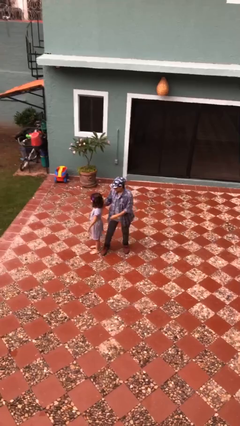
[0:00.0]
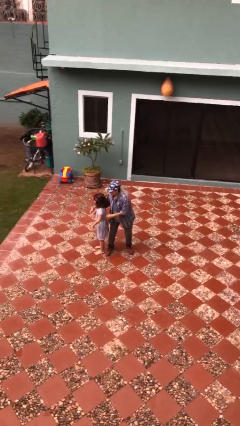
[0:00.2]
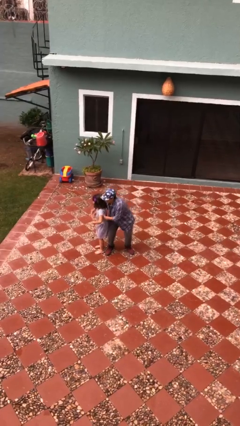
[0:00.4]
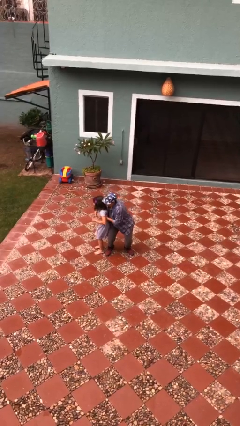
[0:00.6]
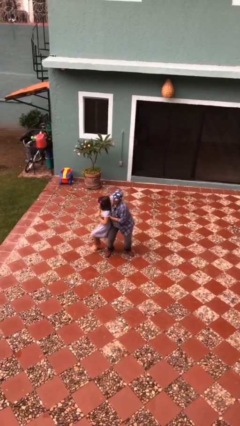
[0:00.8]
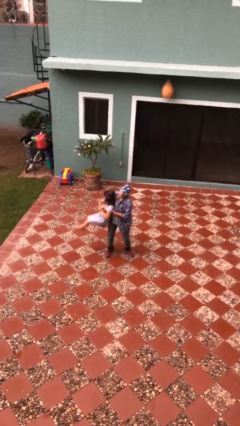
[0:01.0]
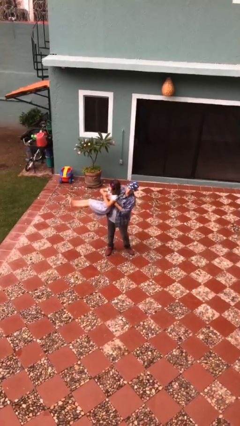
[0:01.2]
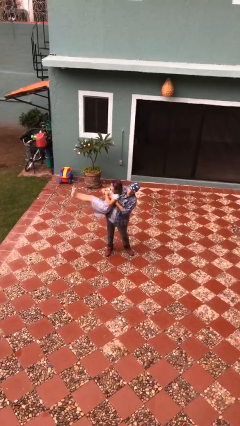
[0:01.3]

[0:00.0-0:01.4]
person picks up person

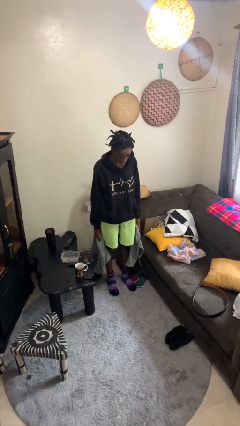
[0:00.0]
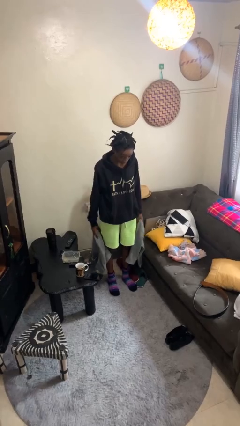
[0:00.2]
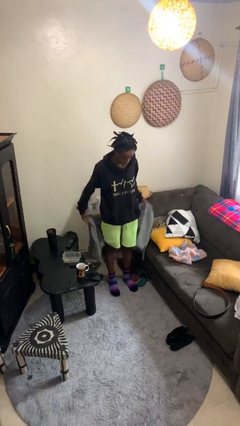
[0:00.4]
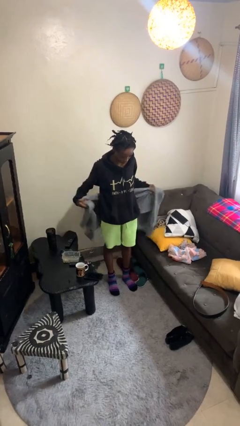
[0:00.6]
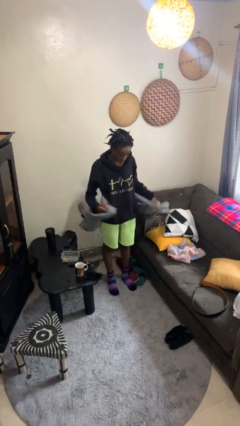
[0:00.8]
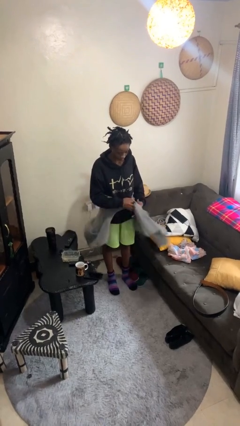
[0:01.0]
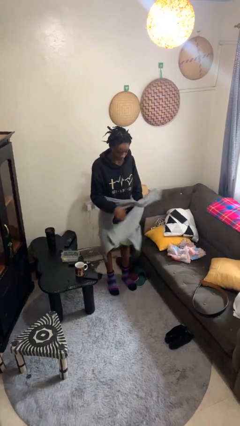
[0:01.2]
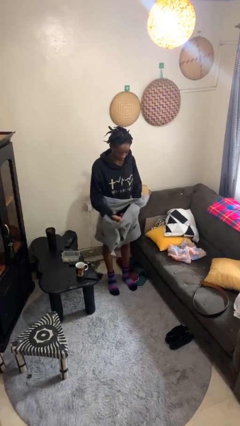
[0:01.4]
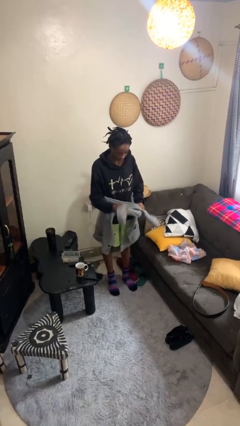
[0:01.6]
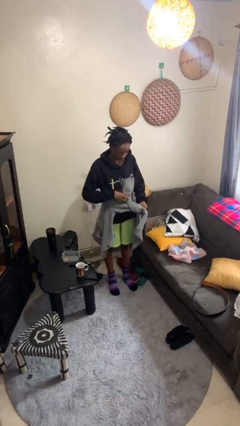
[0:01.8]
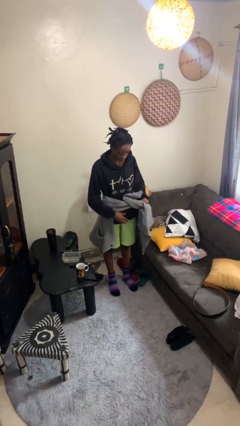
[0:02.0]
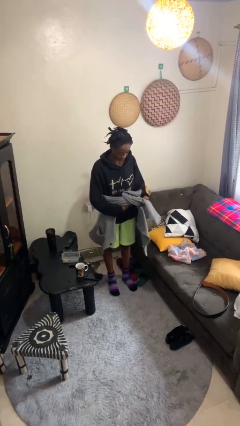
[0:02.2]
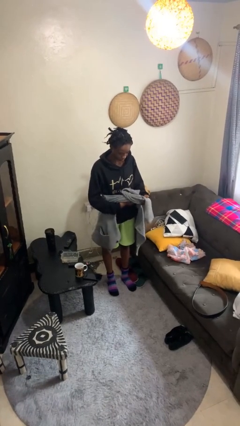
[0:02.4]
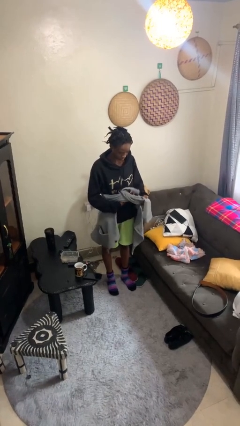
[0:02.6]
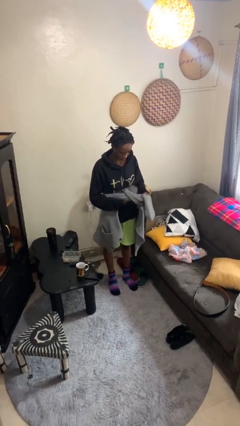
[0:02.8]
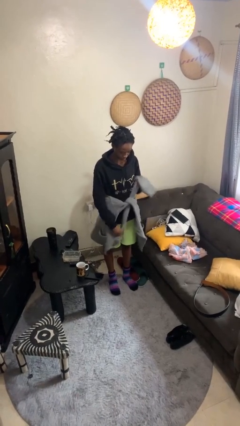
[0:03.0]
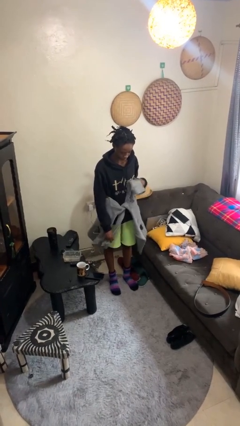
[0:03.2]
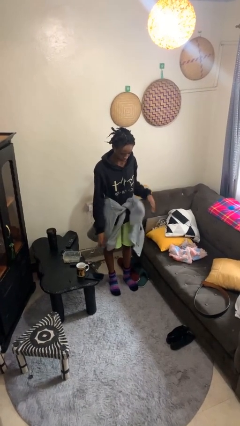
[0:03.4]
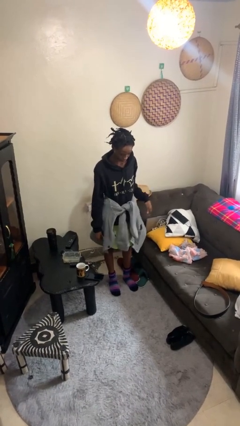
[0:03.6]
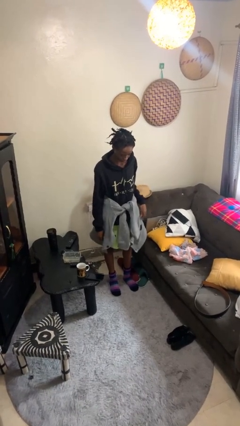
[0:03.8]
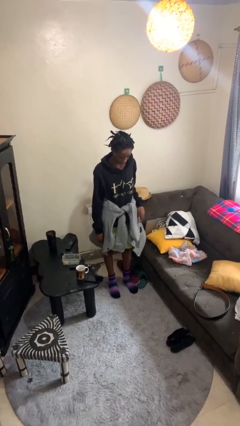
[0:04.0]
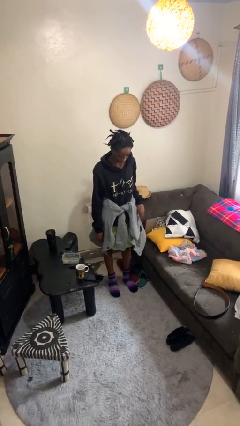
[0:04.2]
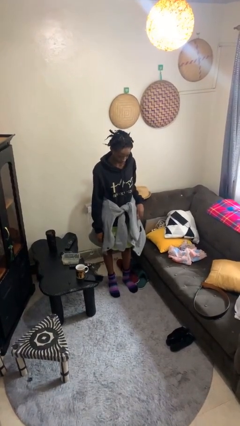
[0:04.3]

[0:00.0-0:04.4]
person ties jacket around waist

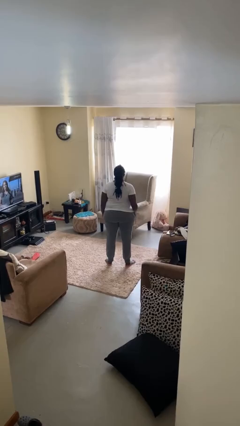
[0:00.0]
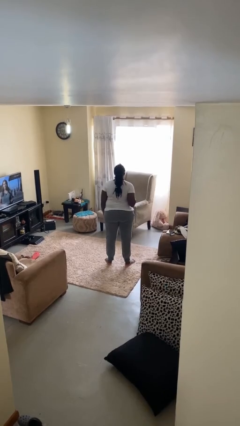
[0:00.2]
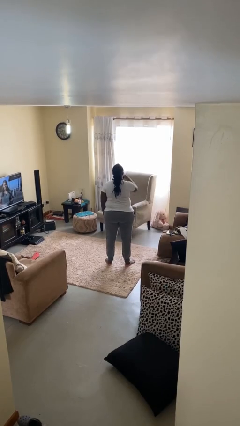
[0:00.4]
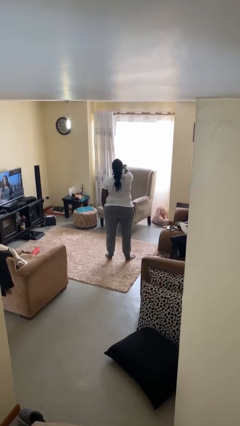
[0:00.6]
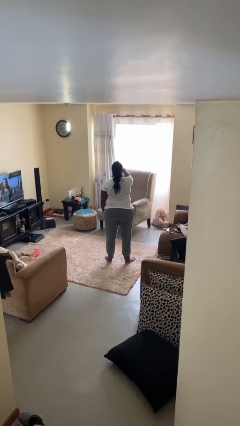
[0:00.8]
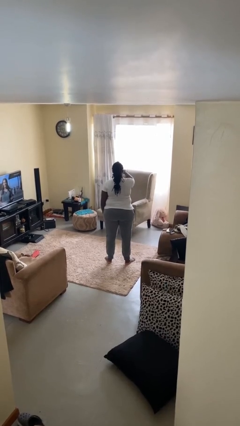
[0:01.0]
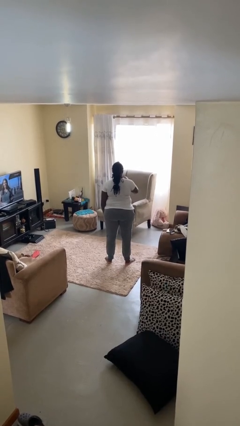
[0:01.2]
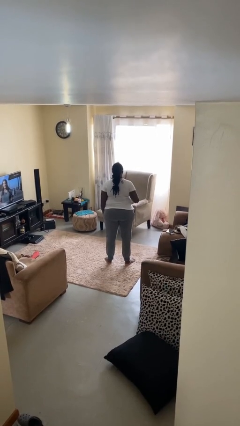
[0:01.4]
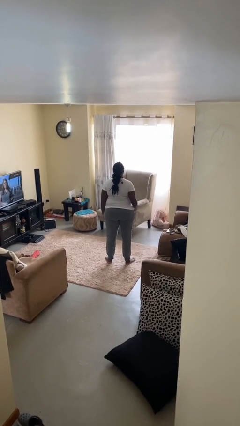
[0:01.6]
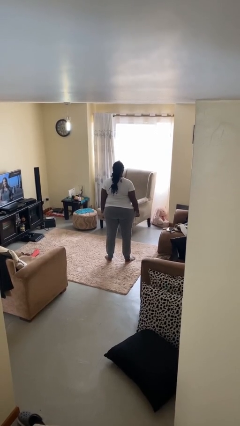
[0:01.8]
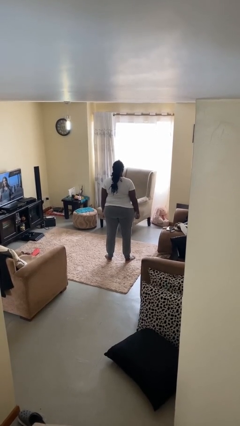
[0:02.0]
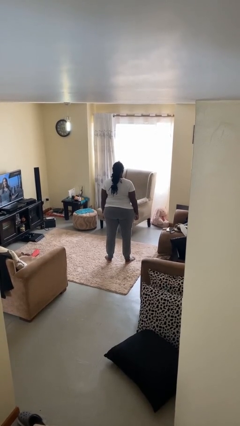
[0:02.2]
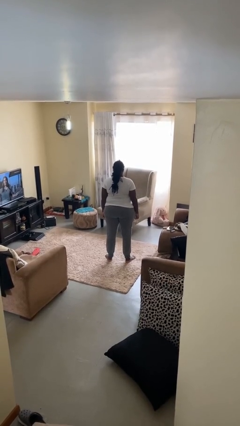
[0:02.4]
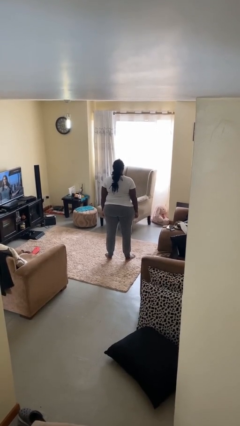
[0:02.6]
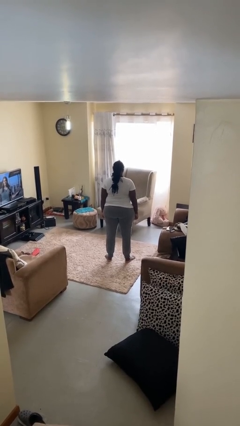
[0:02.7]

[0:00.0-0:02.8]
person punches

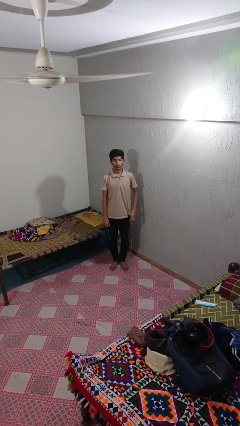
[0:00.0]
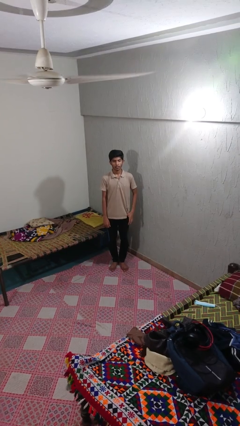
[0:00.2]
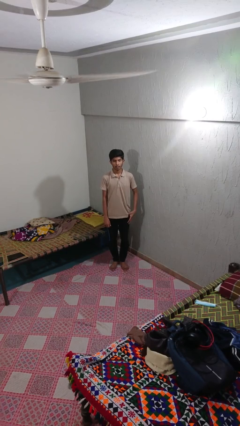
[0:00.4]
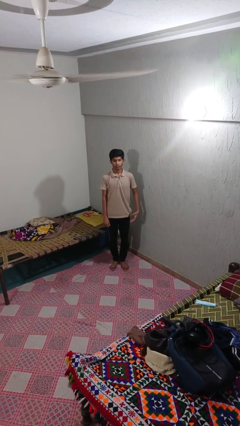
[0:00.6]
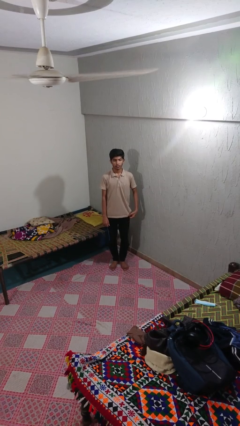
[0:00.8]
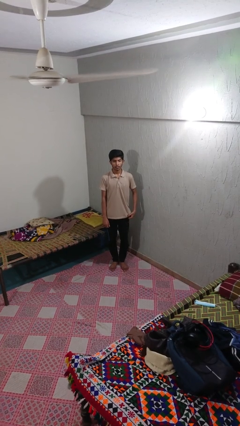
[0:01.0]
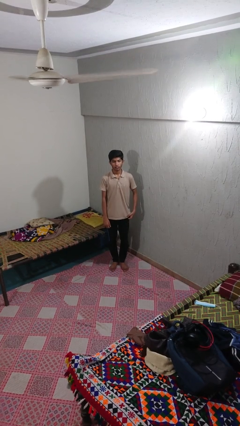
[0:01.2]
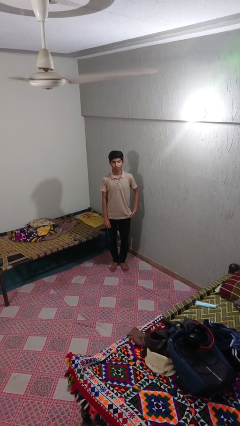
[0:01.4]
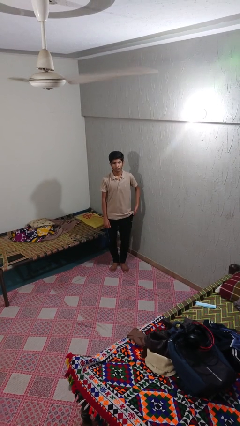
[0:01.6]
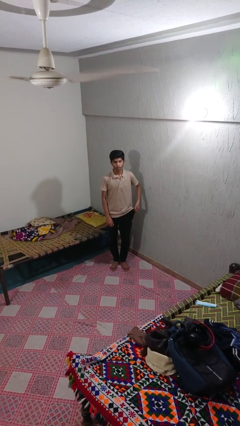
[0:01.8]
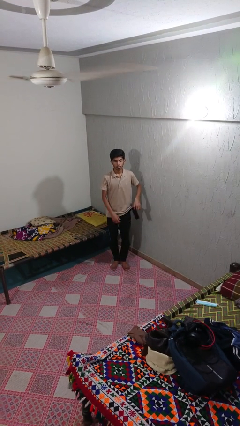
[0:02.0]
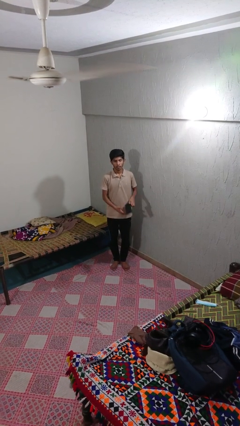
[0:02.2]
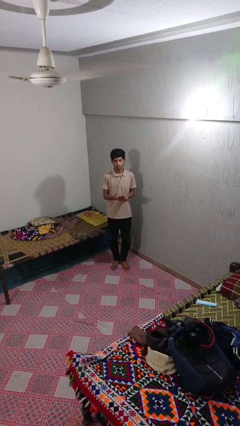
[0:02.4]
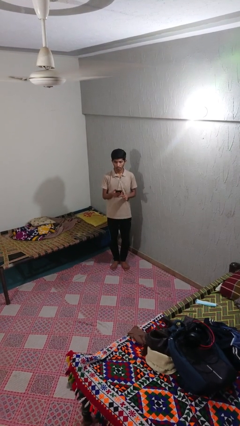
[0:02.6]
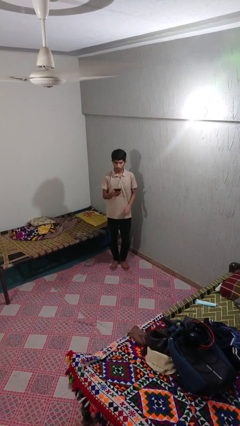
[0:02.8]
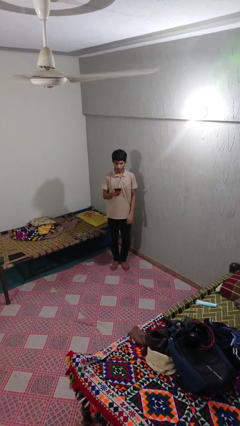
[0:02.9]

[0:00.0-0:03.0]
person takes phone from pocket

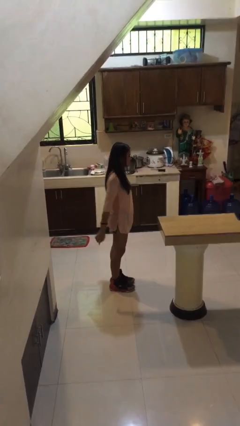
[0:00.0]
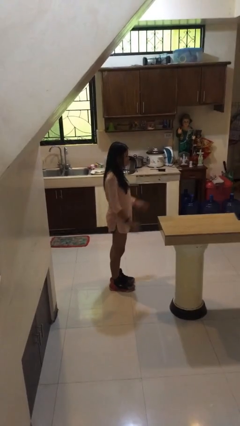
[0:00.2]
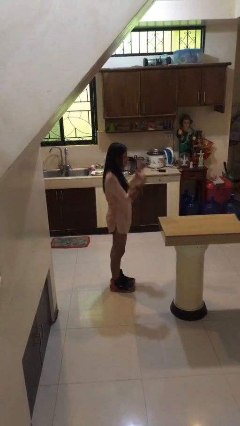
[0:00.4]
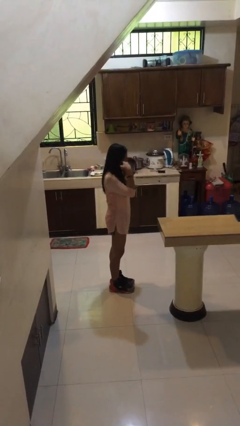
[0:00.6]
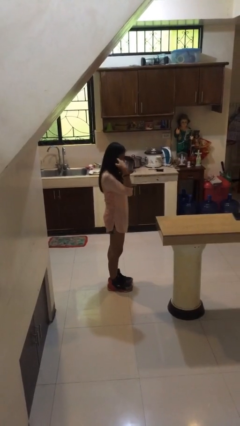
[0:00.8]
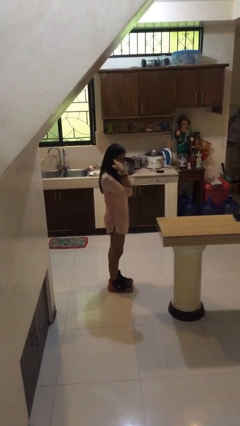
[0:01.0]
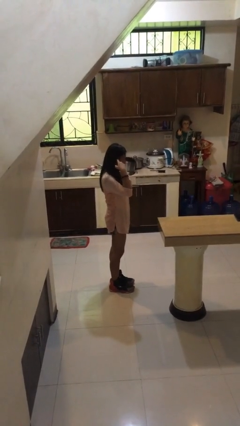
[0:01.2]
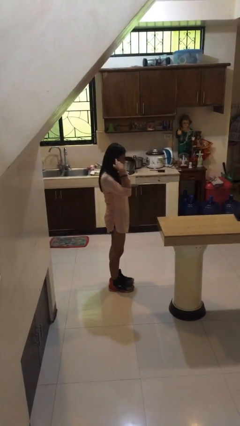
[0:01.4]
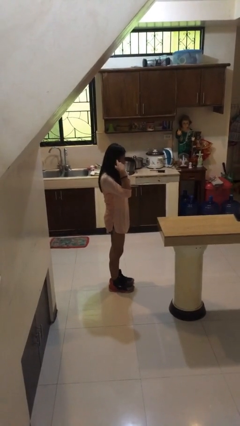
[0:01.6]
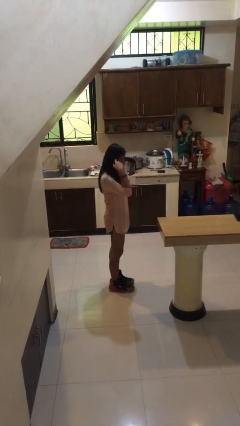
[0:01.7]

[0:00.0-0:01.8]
person puts fingers in ear

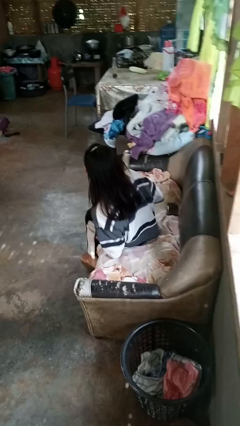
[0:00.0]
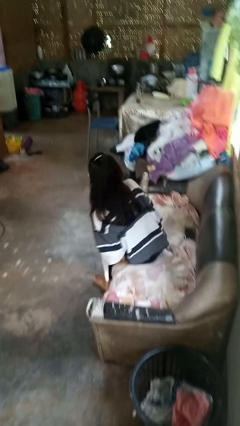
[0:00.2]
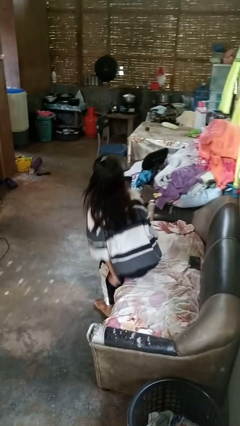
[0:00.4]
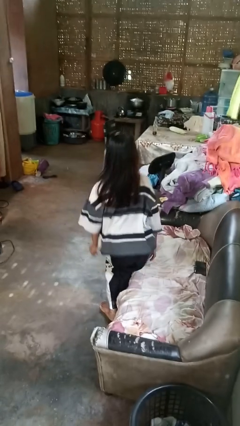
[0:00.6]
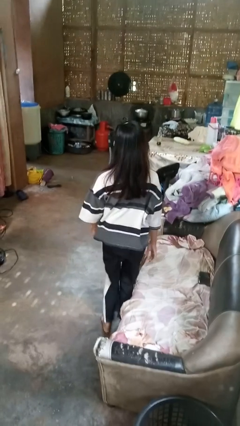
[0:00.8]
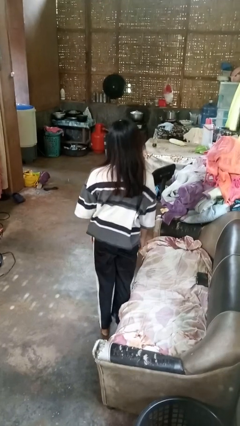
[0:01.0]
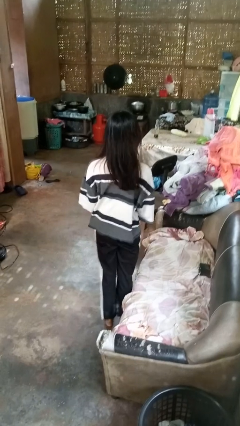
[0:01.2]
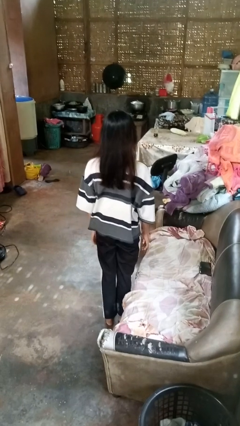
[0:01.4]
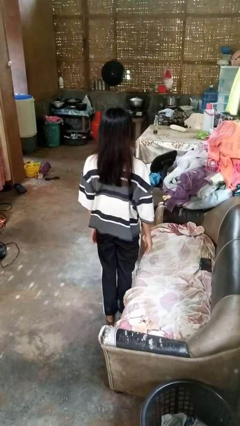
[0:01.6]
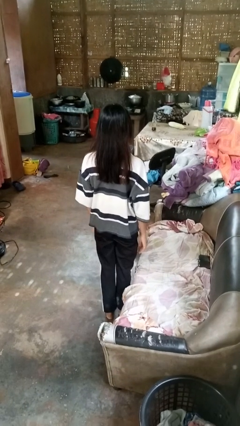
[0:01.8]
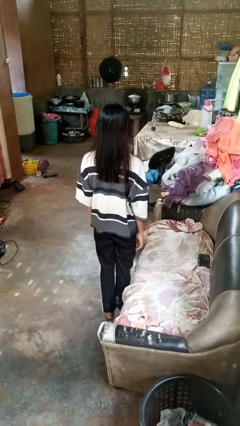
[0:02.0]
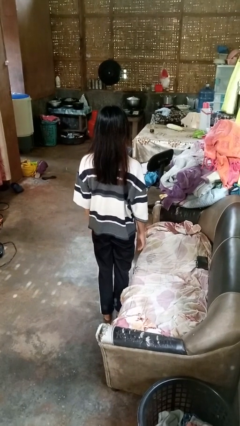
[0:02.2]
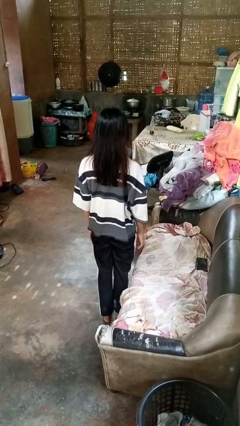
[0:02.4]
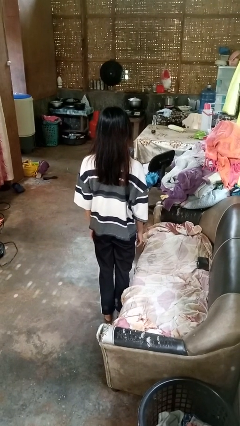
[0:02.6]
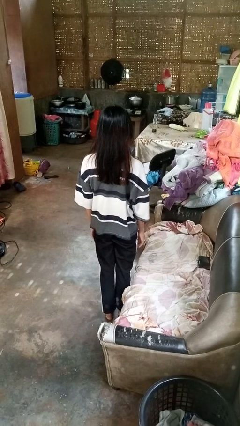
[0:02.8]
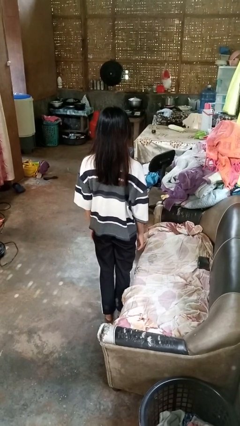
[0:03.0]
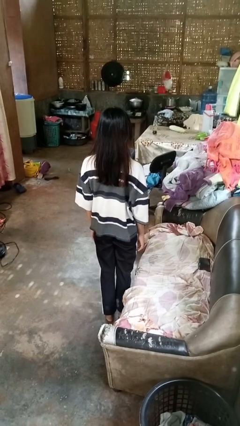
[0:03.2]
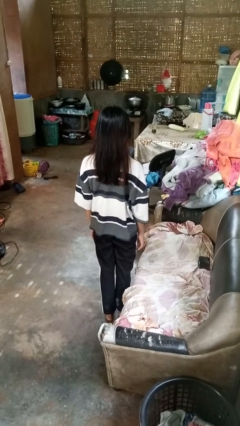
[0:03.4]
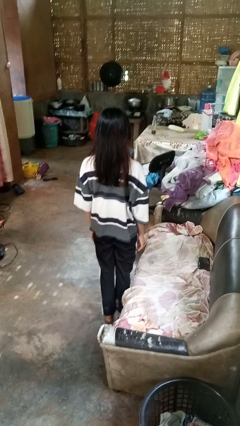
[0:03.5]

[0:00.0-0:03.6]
person stands up

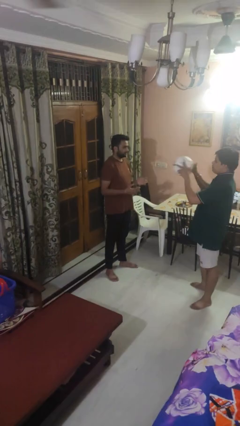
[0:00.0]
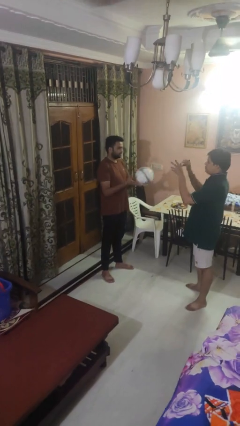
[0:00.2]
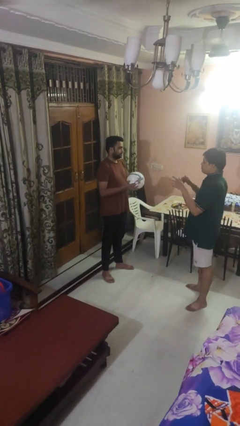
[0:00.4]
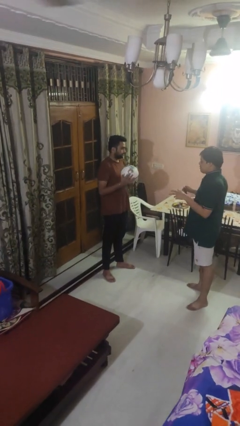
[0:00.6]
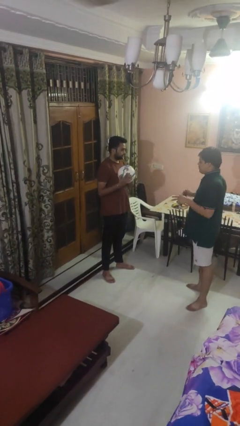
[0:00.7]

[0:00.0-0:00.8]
person catches object from person
